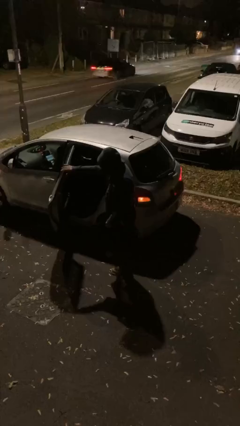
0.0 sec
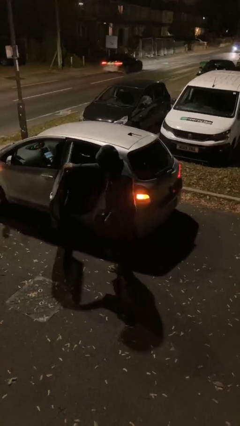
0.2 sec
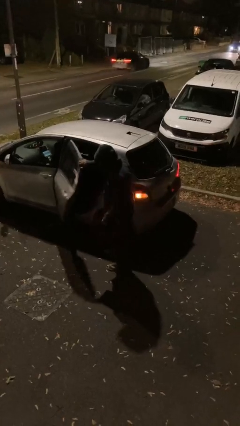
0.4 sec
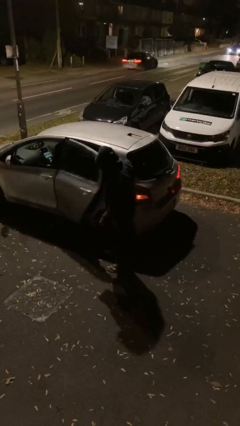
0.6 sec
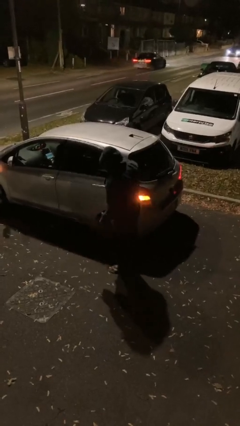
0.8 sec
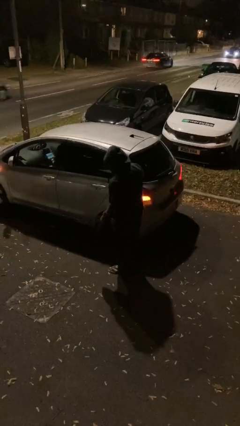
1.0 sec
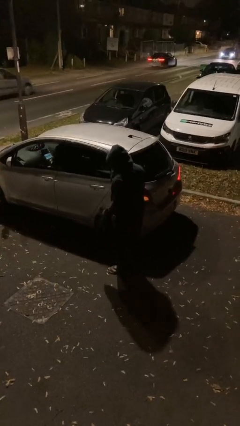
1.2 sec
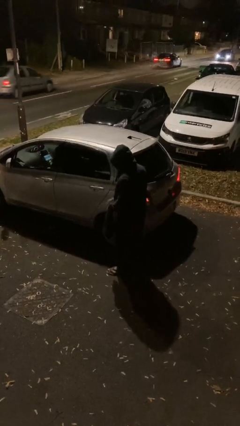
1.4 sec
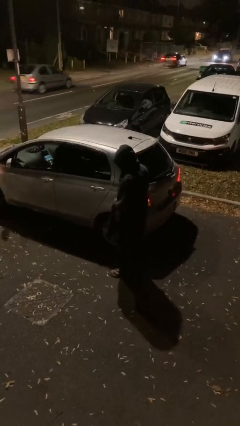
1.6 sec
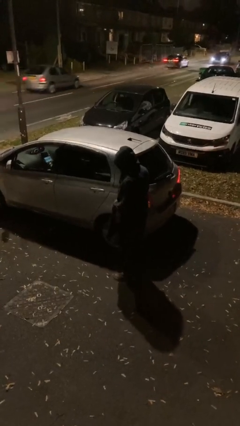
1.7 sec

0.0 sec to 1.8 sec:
person closes car door

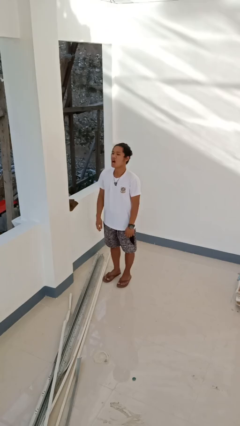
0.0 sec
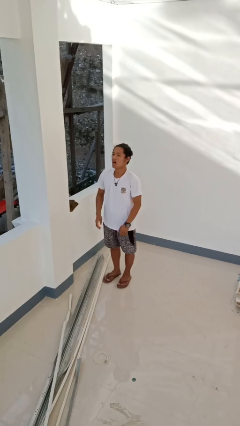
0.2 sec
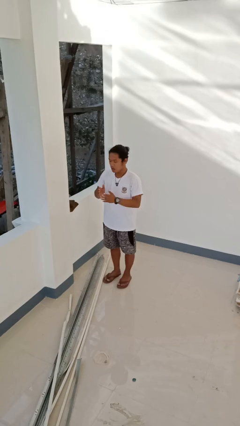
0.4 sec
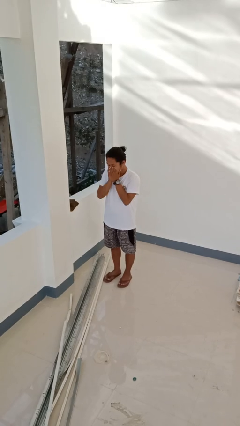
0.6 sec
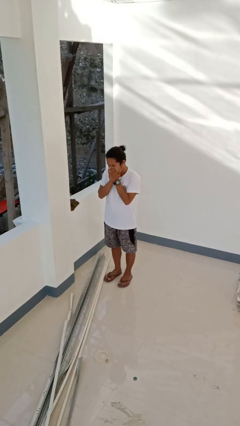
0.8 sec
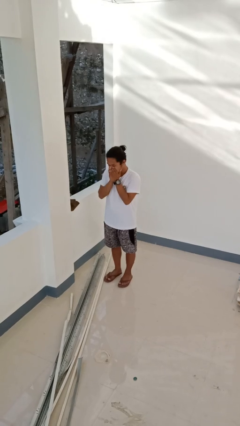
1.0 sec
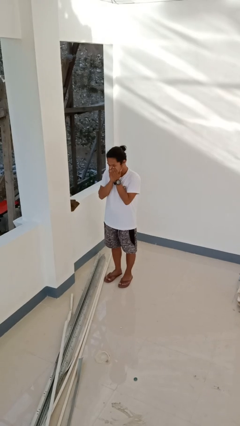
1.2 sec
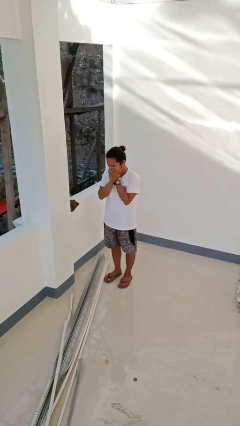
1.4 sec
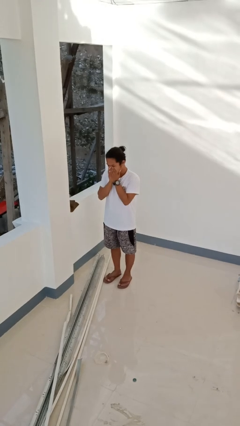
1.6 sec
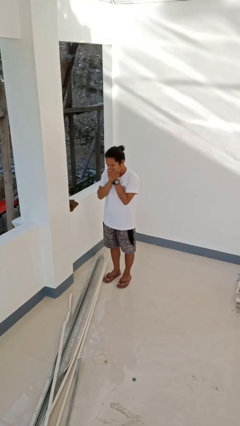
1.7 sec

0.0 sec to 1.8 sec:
person sneezes into hand

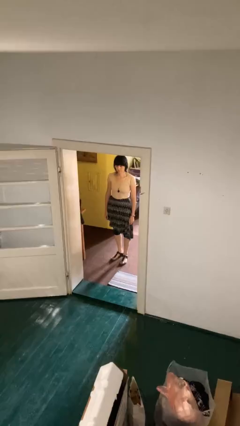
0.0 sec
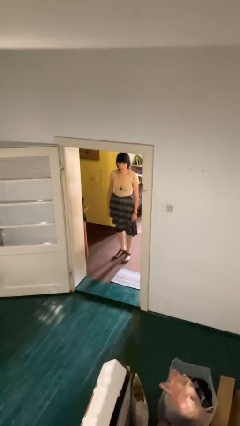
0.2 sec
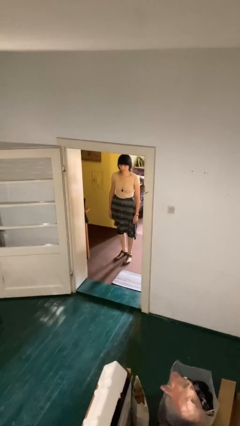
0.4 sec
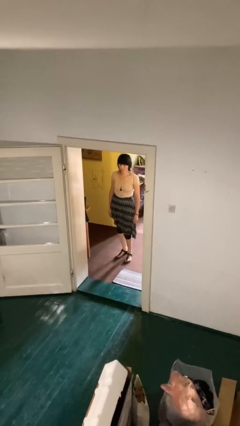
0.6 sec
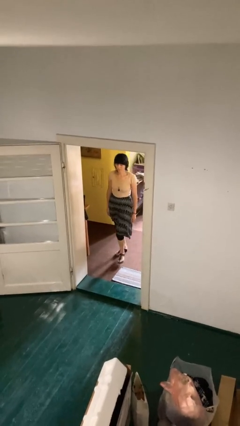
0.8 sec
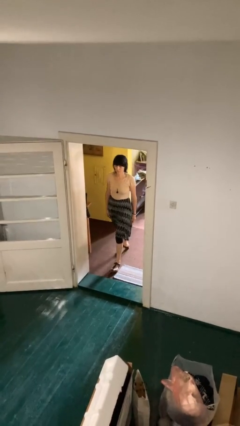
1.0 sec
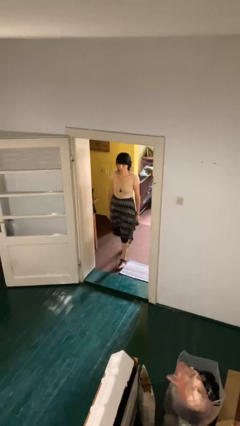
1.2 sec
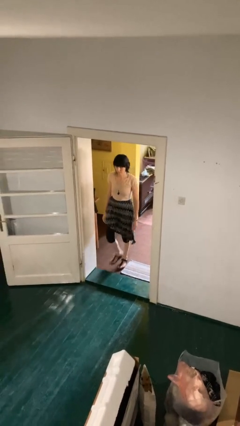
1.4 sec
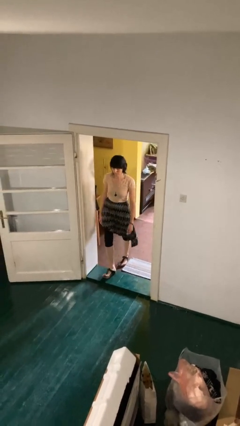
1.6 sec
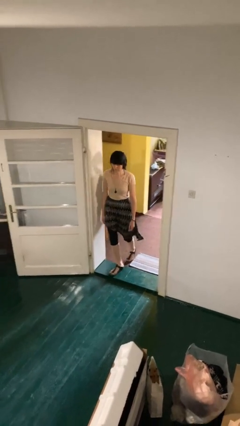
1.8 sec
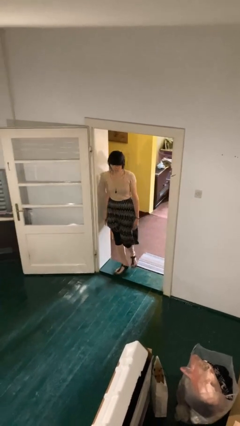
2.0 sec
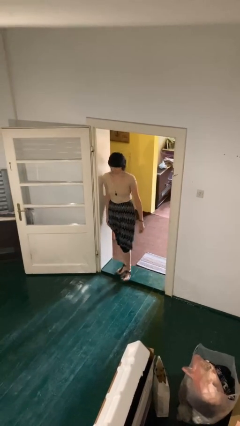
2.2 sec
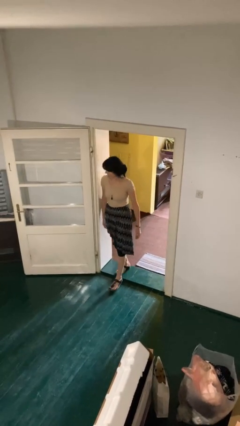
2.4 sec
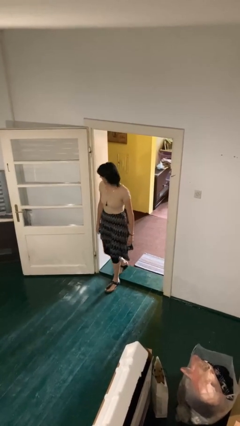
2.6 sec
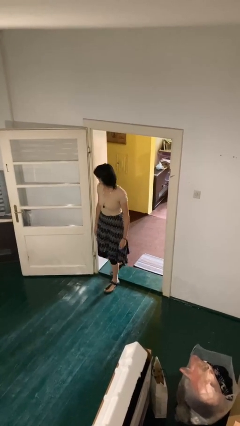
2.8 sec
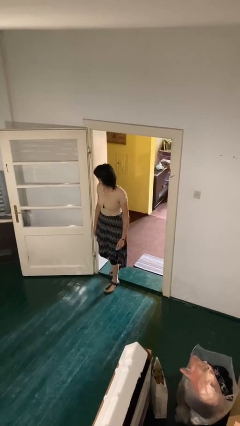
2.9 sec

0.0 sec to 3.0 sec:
person bumps into wall

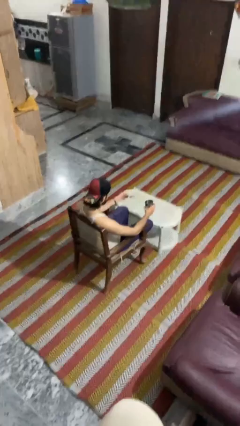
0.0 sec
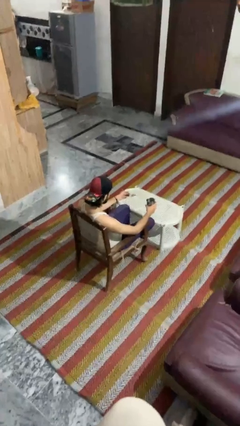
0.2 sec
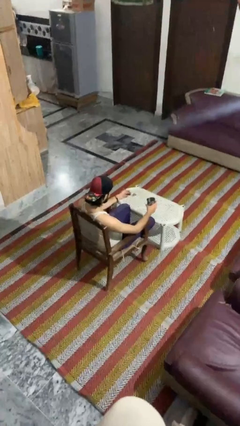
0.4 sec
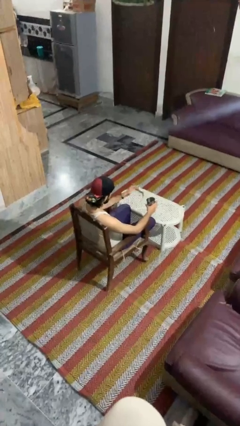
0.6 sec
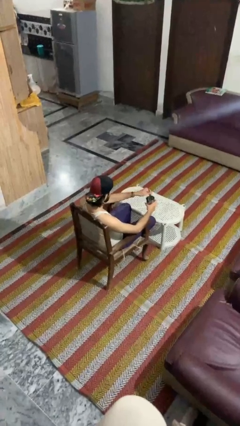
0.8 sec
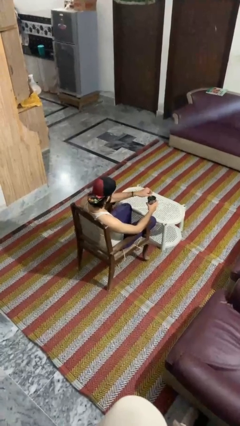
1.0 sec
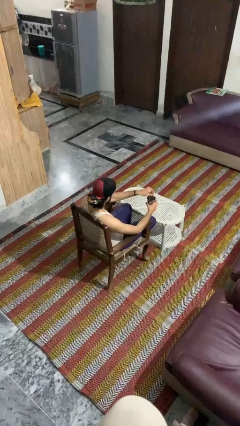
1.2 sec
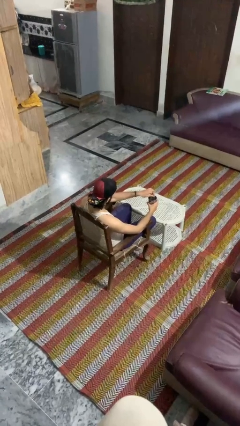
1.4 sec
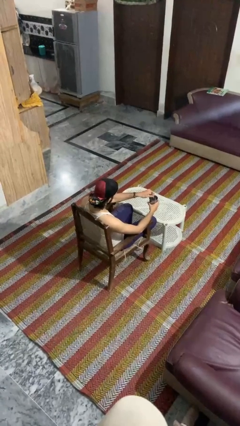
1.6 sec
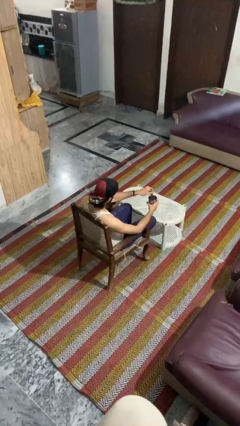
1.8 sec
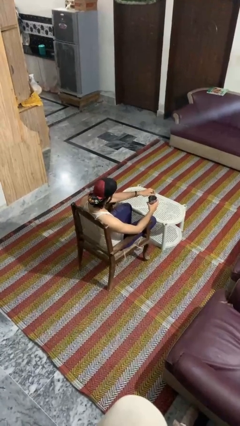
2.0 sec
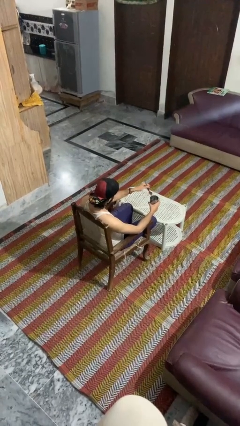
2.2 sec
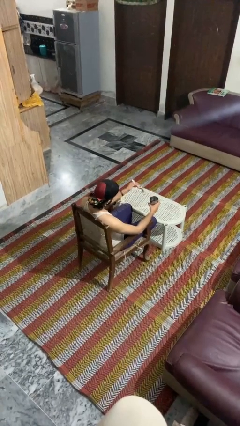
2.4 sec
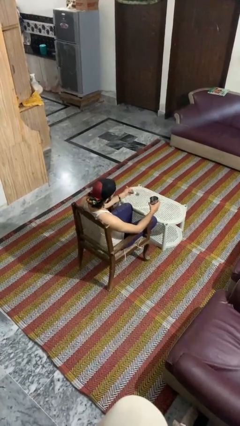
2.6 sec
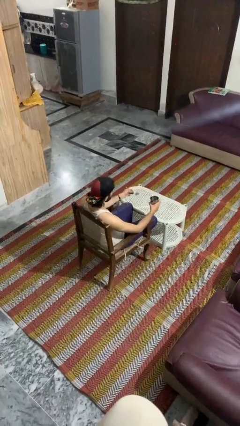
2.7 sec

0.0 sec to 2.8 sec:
person stirs mug

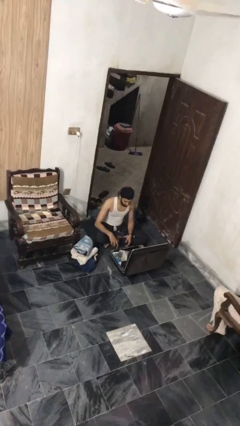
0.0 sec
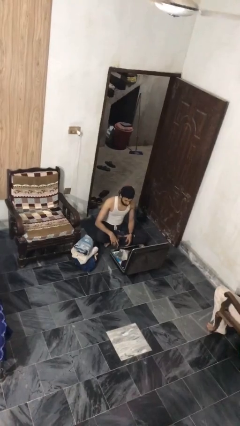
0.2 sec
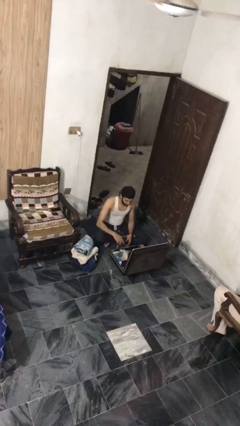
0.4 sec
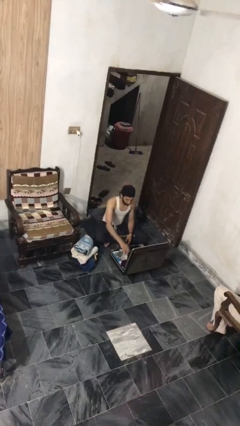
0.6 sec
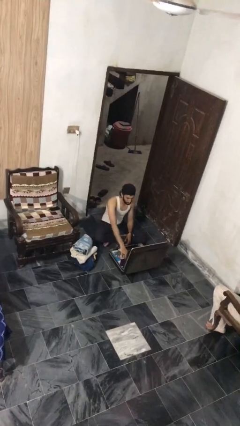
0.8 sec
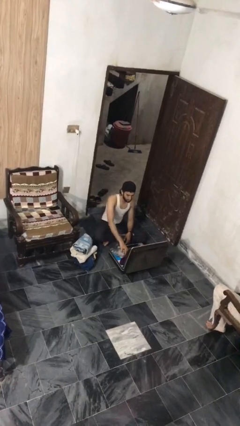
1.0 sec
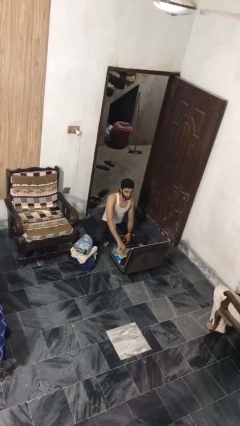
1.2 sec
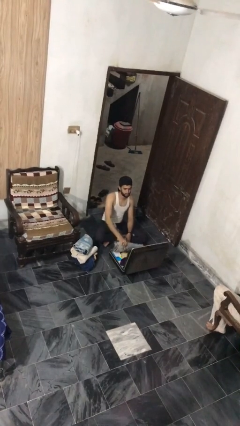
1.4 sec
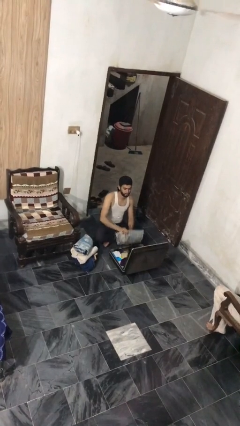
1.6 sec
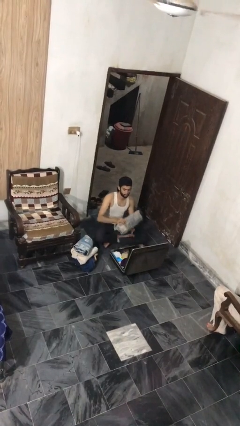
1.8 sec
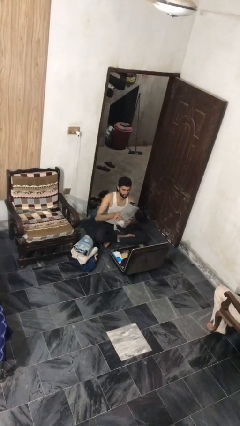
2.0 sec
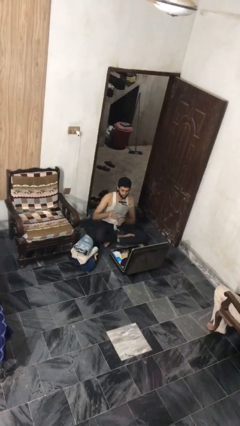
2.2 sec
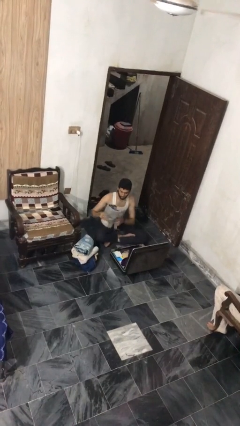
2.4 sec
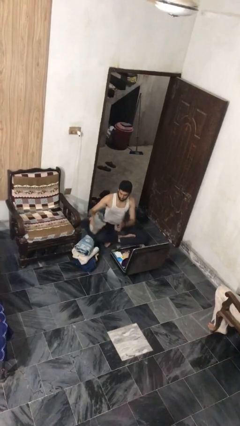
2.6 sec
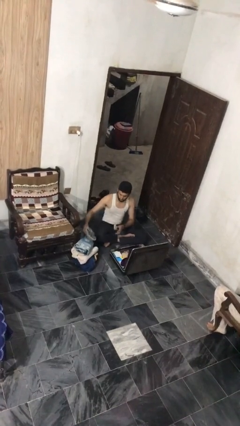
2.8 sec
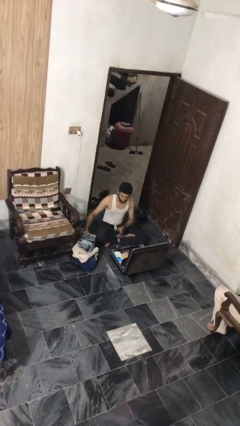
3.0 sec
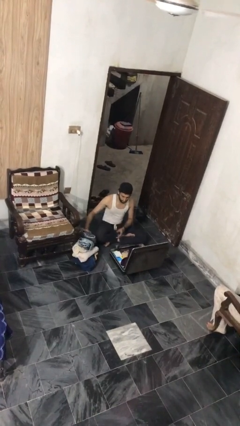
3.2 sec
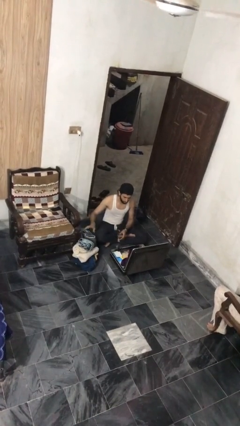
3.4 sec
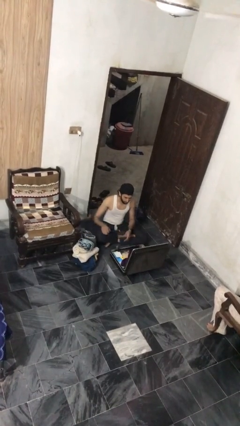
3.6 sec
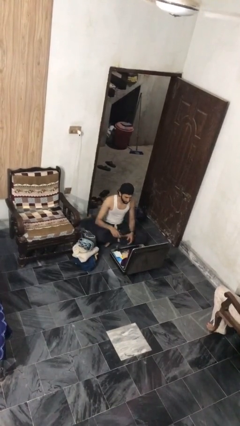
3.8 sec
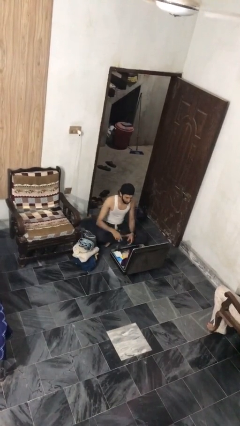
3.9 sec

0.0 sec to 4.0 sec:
person unloads clothes from suitcase

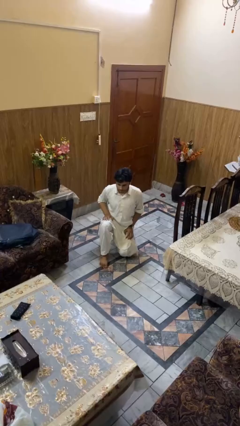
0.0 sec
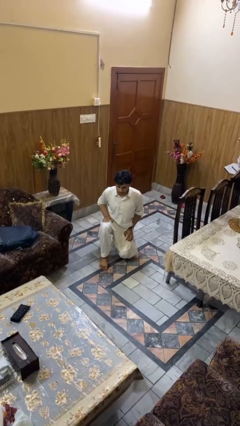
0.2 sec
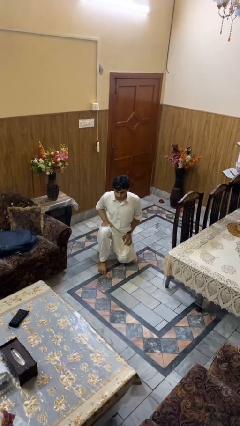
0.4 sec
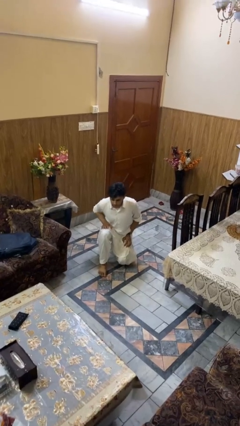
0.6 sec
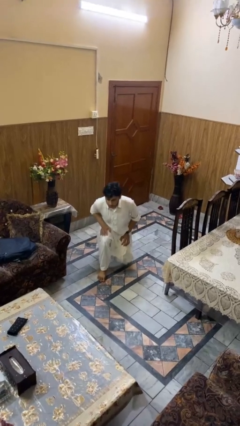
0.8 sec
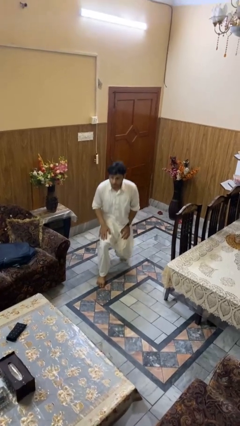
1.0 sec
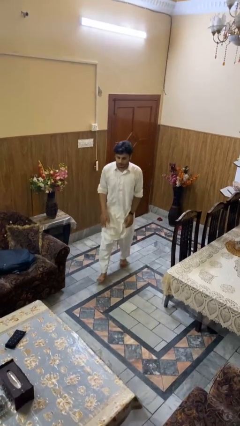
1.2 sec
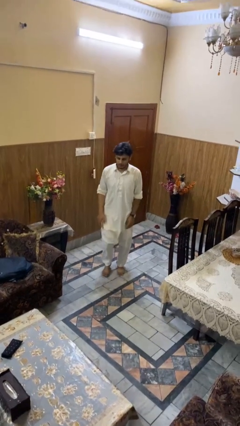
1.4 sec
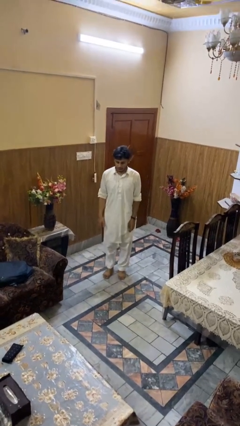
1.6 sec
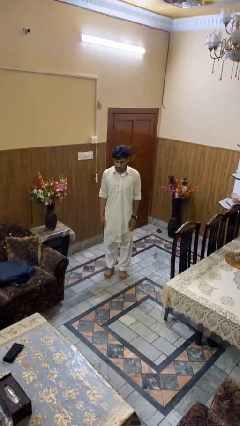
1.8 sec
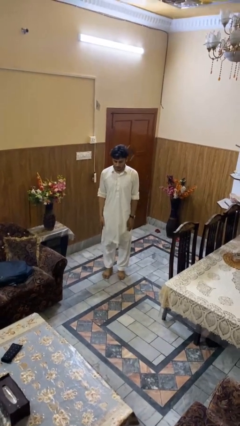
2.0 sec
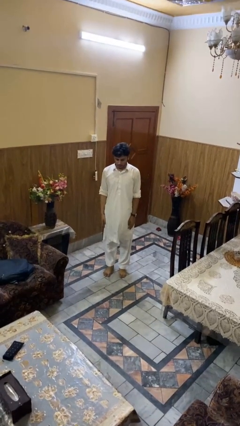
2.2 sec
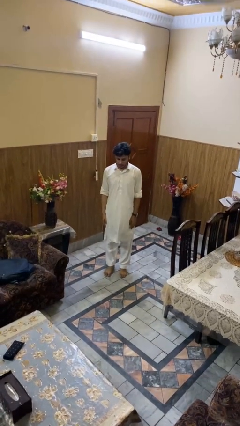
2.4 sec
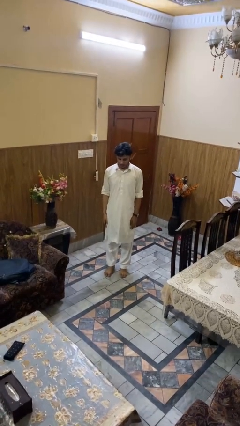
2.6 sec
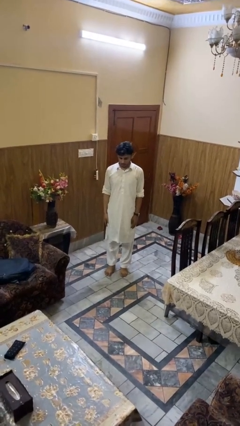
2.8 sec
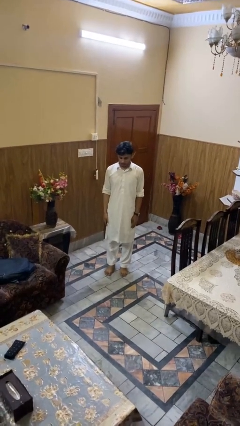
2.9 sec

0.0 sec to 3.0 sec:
person stands up from floor

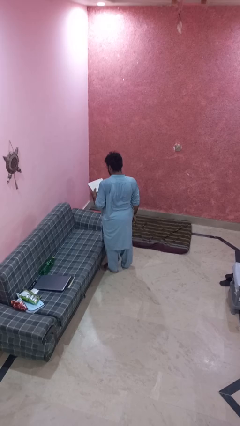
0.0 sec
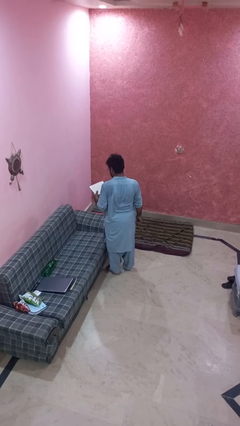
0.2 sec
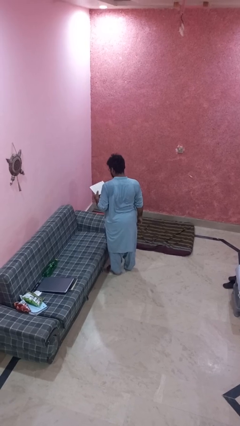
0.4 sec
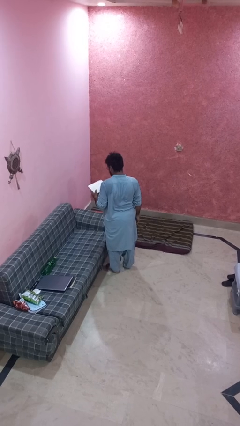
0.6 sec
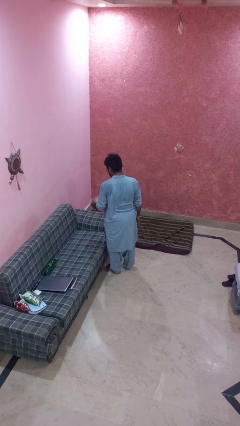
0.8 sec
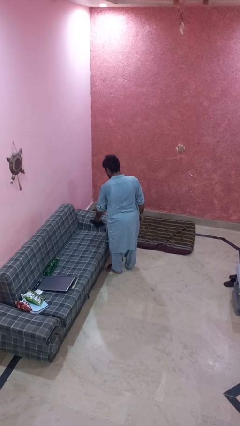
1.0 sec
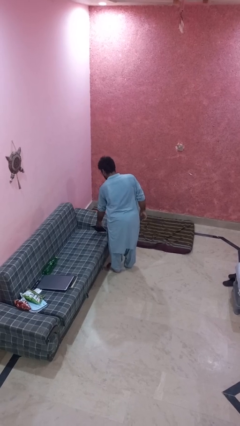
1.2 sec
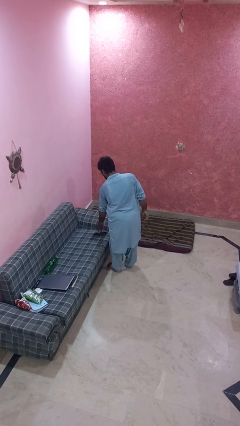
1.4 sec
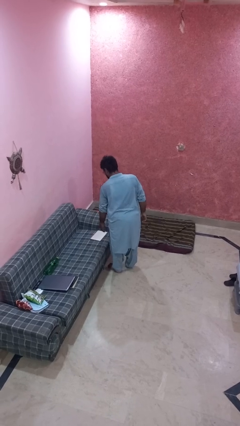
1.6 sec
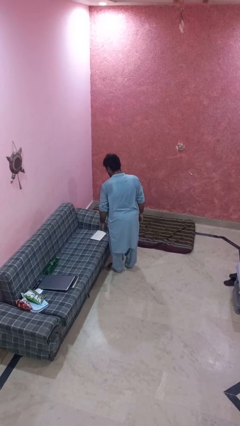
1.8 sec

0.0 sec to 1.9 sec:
person puts down object on couch
